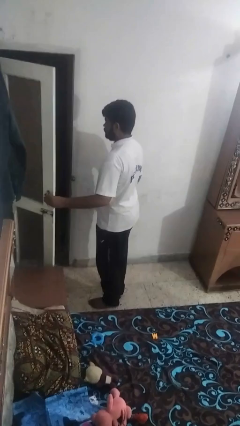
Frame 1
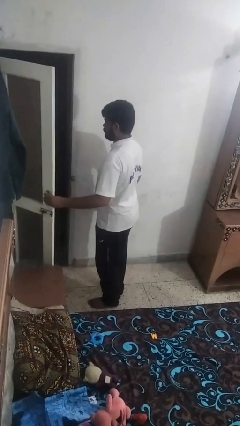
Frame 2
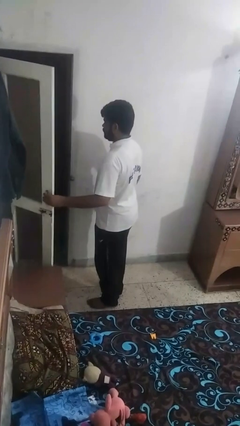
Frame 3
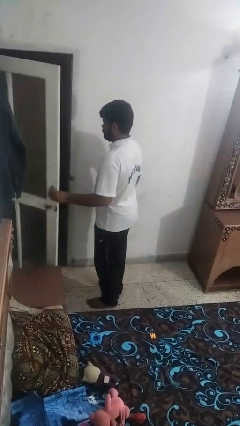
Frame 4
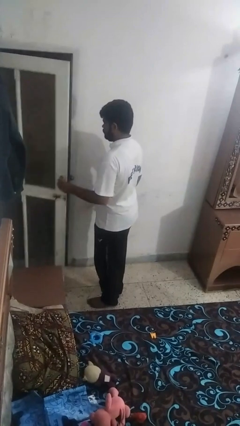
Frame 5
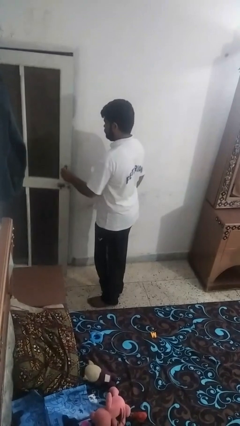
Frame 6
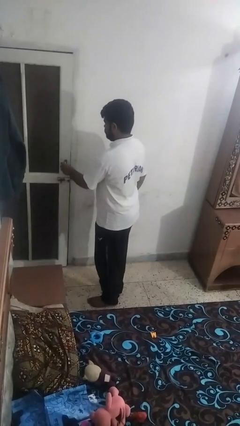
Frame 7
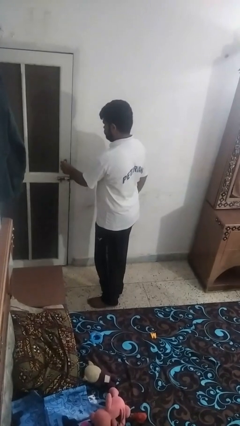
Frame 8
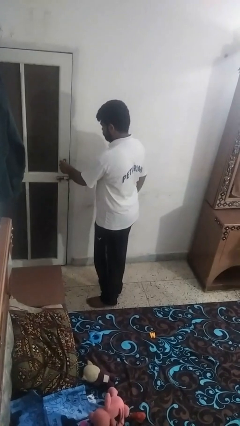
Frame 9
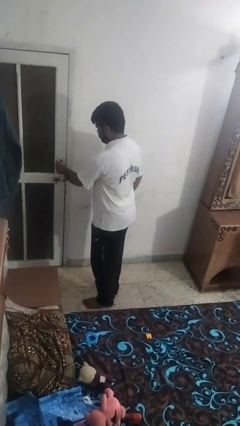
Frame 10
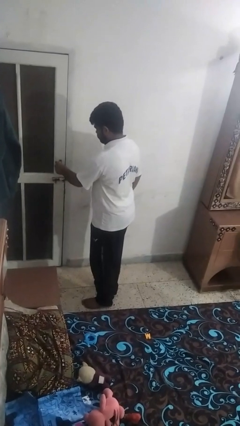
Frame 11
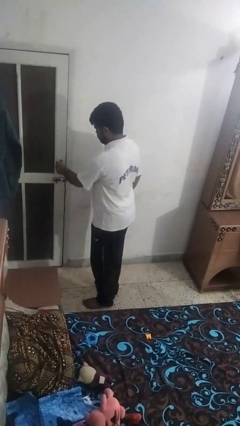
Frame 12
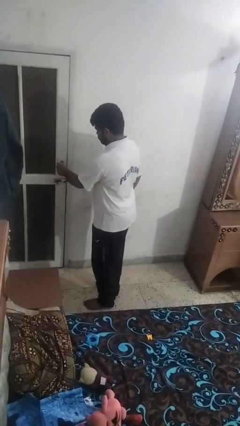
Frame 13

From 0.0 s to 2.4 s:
person closes facility door

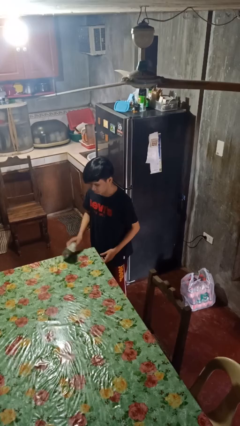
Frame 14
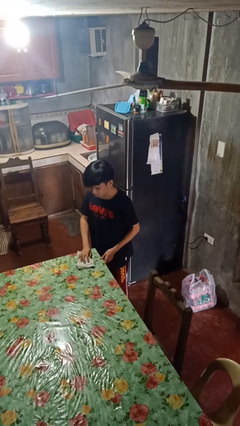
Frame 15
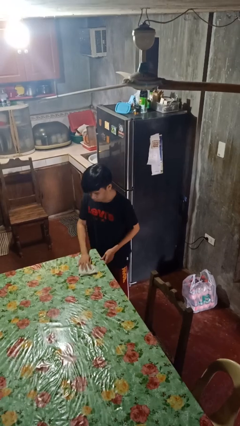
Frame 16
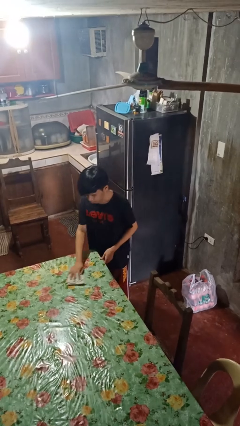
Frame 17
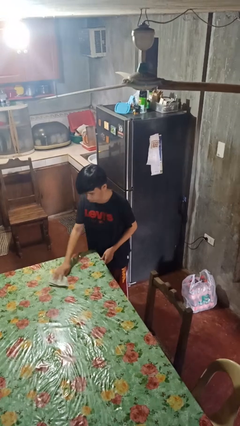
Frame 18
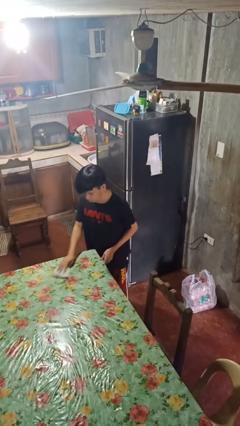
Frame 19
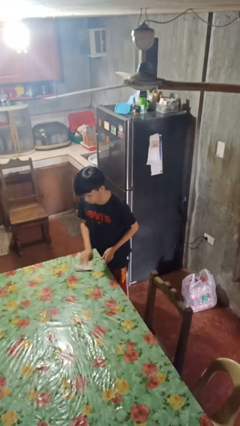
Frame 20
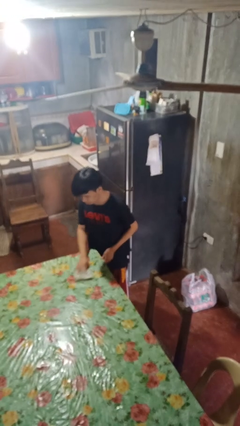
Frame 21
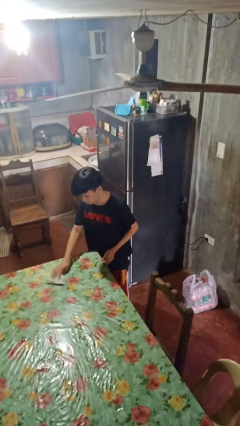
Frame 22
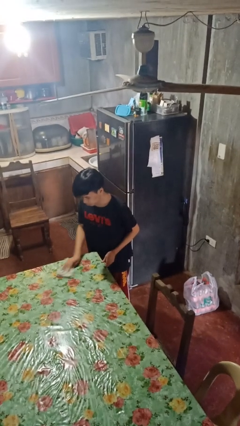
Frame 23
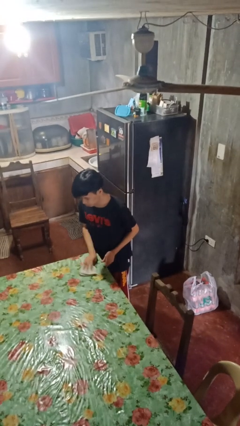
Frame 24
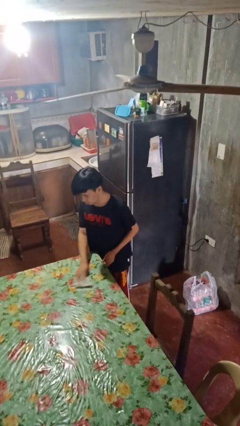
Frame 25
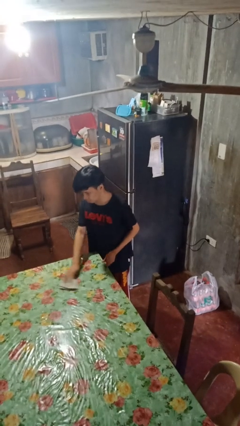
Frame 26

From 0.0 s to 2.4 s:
person cleans table with rag

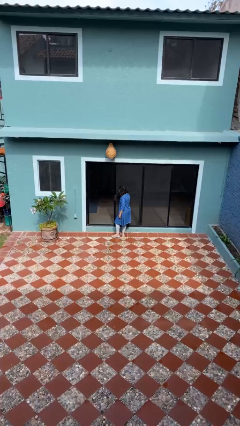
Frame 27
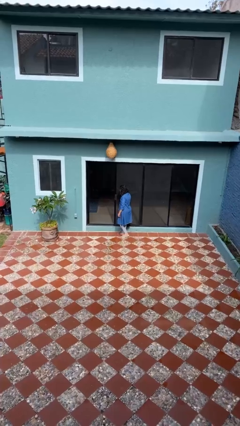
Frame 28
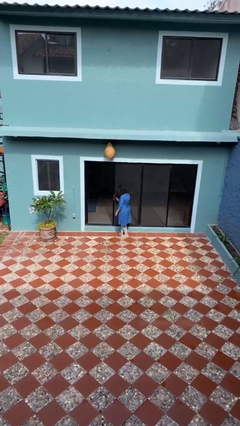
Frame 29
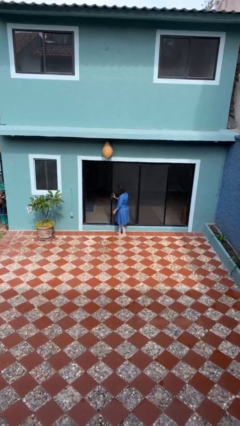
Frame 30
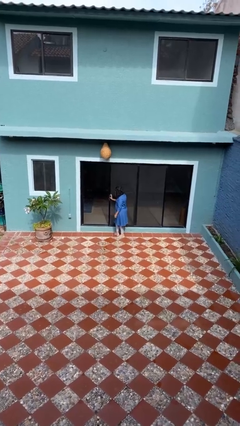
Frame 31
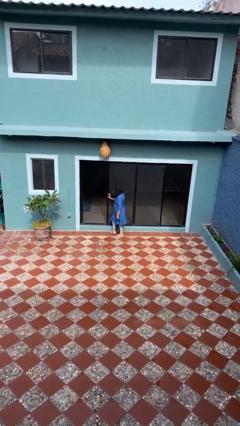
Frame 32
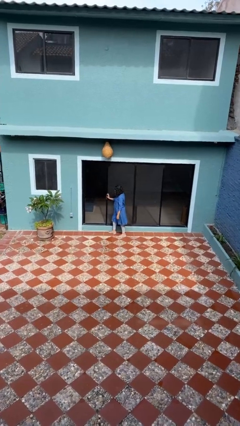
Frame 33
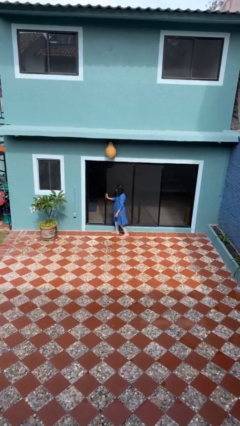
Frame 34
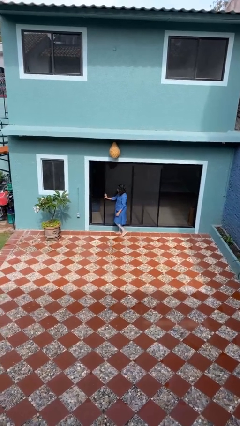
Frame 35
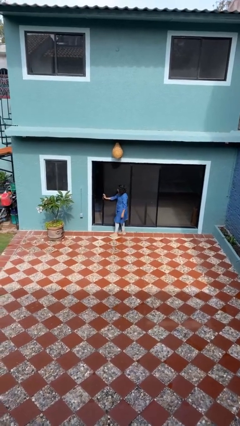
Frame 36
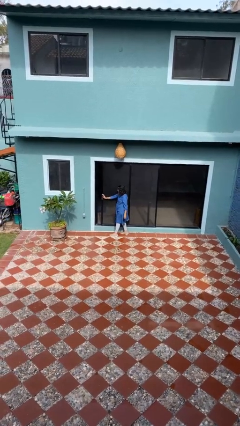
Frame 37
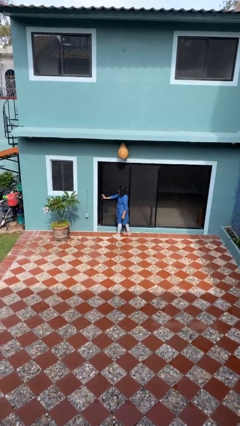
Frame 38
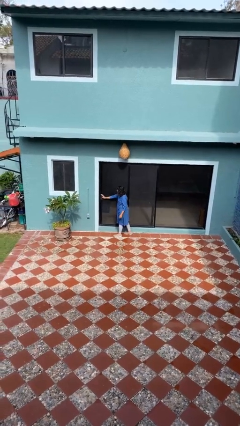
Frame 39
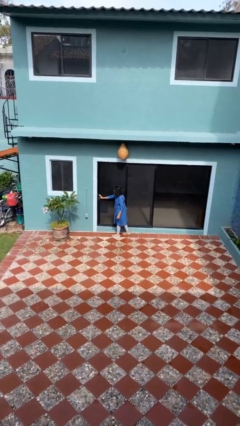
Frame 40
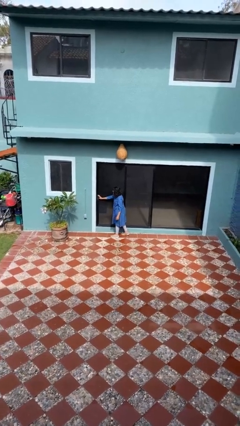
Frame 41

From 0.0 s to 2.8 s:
person closes sliding door

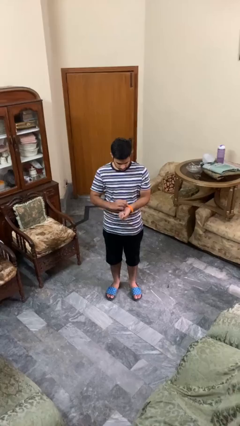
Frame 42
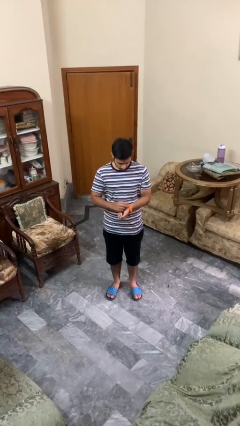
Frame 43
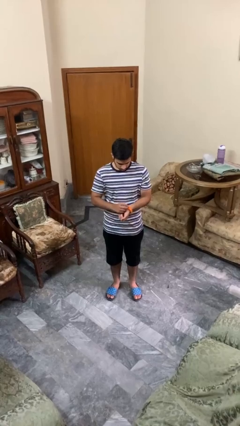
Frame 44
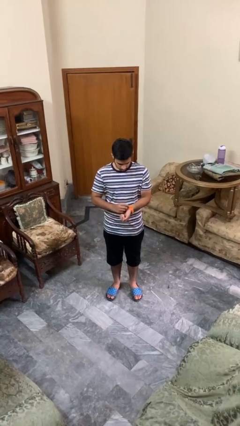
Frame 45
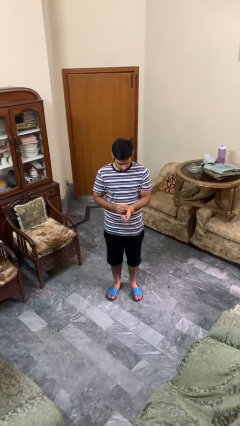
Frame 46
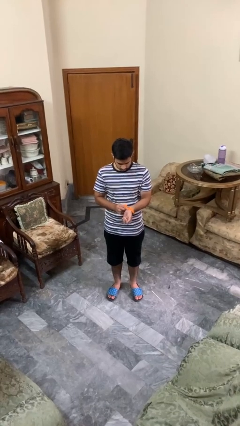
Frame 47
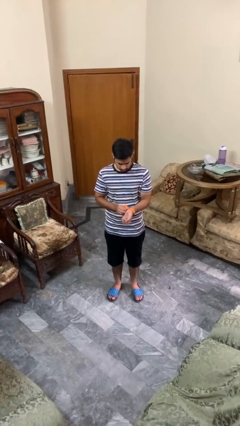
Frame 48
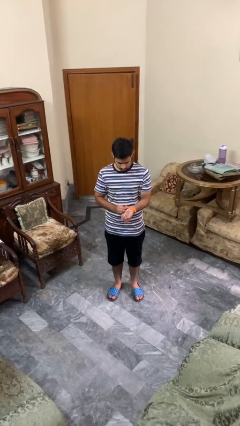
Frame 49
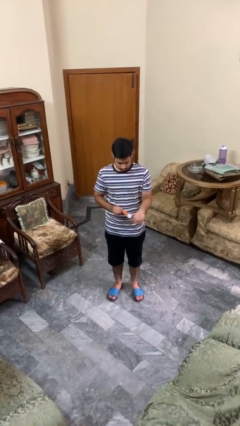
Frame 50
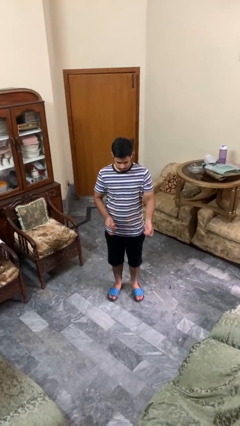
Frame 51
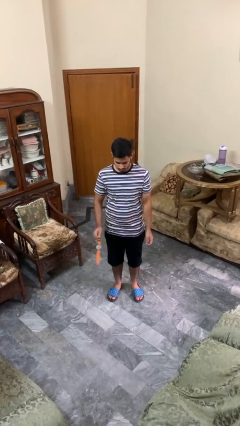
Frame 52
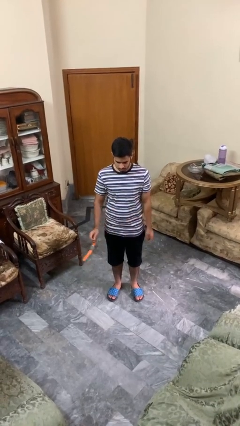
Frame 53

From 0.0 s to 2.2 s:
person takes off wristwatch

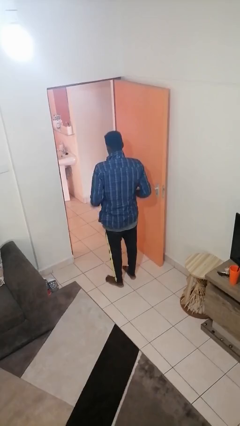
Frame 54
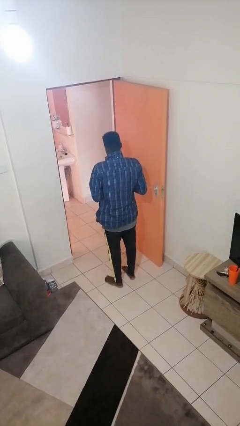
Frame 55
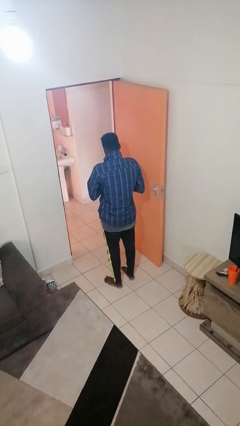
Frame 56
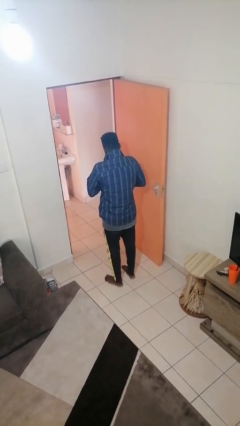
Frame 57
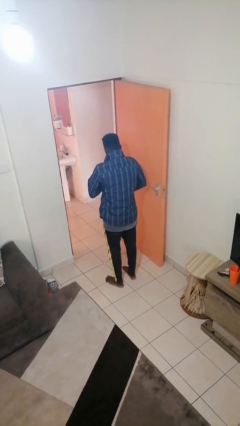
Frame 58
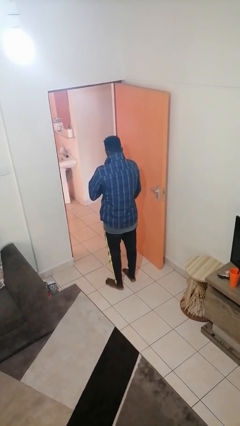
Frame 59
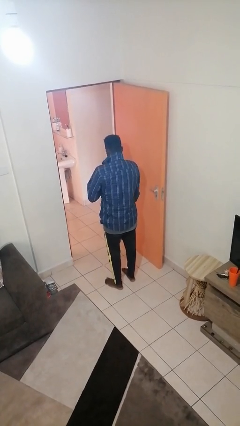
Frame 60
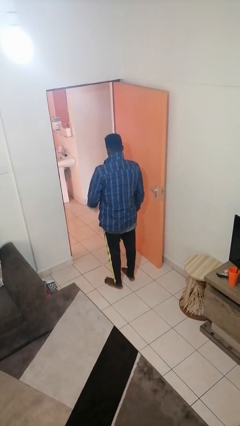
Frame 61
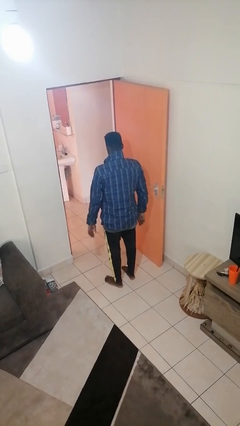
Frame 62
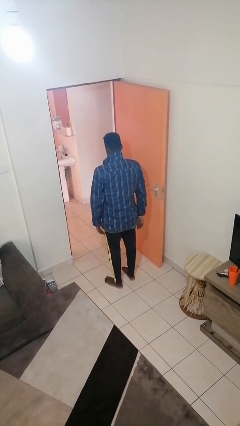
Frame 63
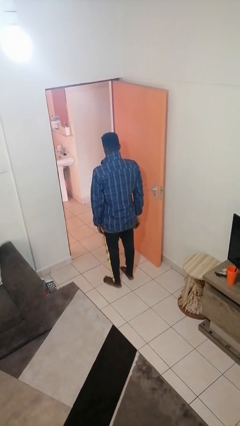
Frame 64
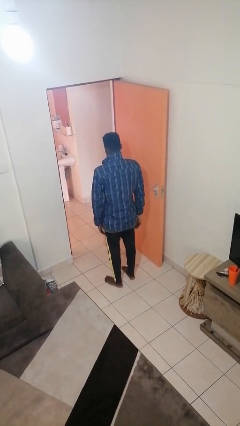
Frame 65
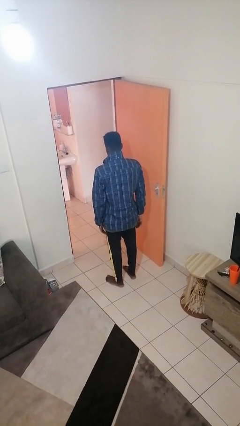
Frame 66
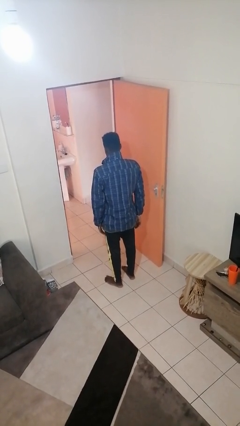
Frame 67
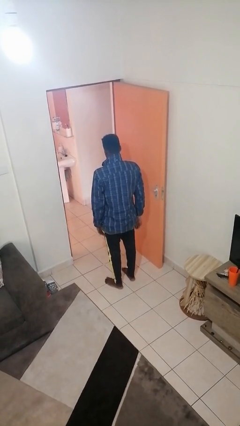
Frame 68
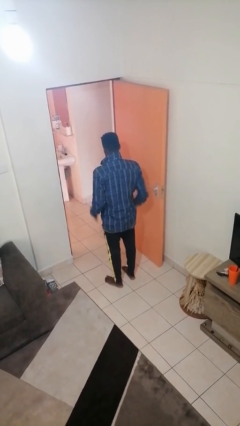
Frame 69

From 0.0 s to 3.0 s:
person unzips jacket

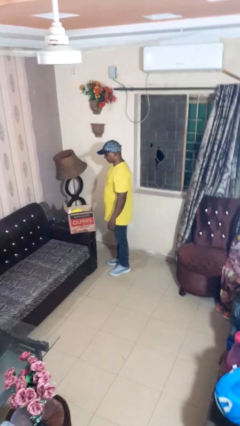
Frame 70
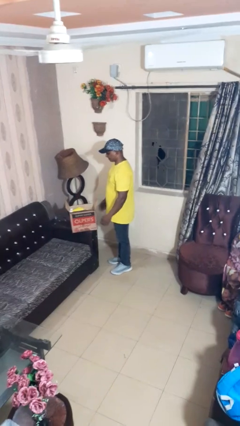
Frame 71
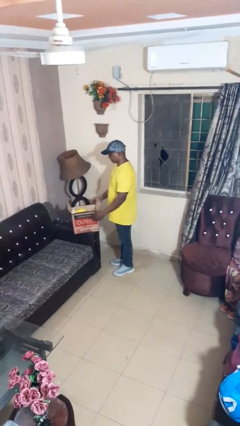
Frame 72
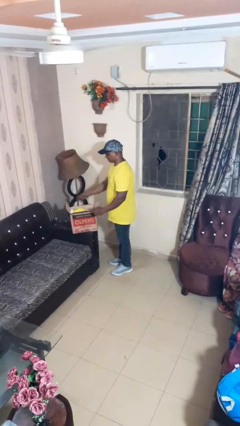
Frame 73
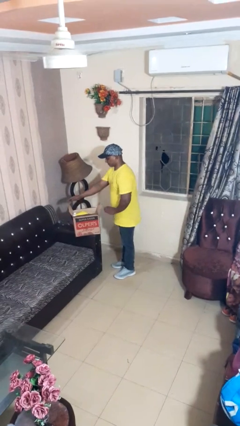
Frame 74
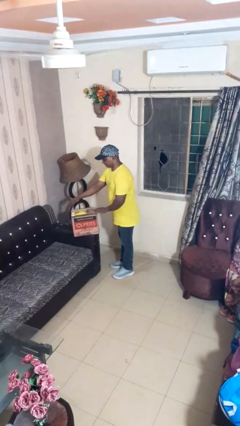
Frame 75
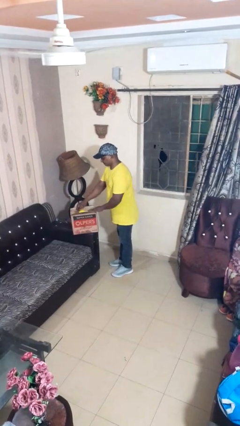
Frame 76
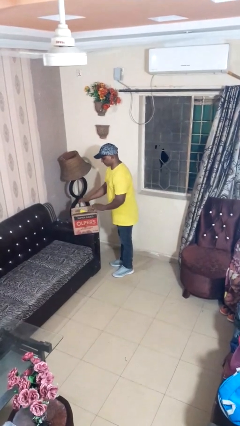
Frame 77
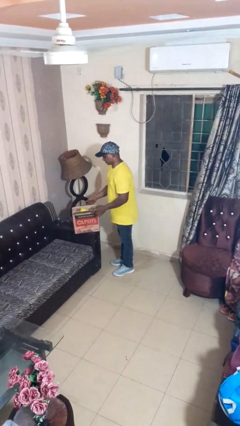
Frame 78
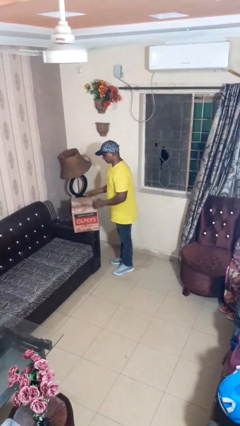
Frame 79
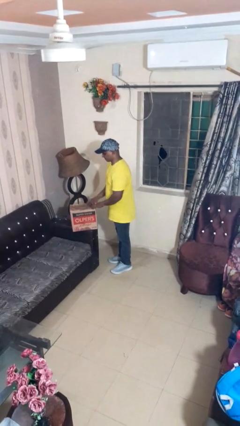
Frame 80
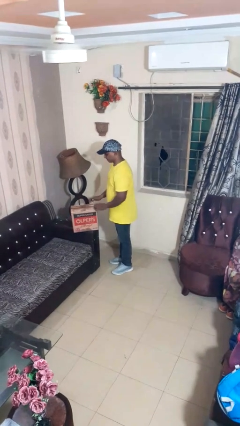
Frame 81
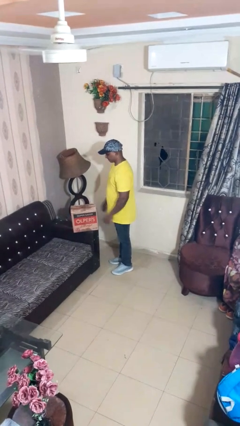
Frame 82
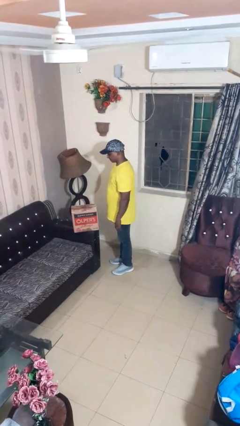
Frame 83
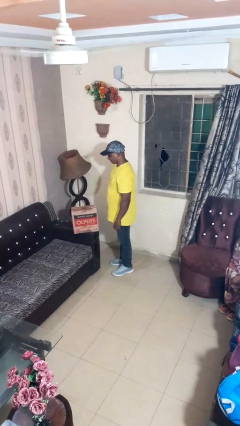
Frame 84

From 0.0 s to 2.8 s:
person closes box

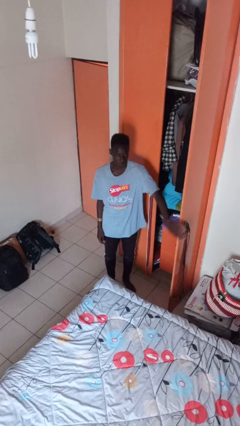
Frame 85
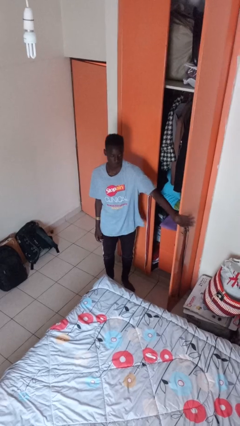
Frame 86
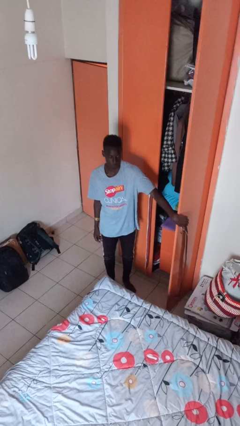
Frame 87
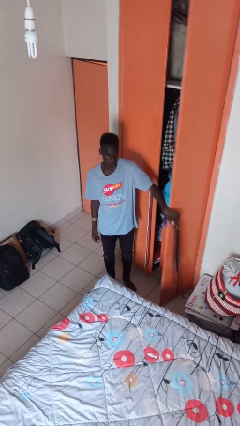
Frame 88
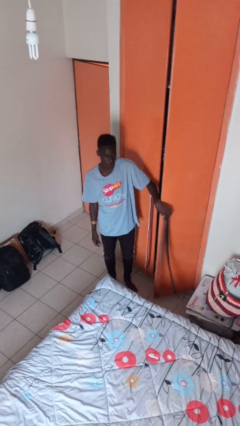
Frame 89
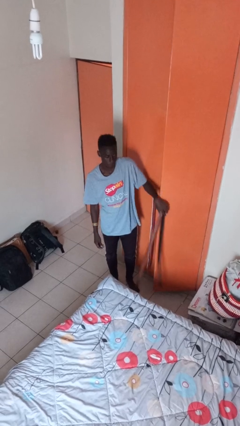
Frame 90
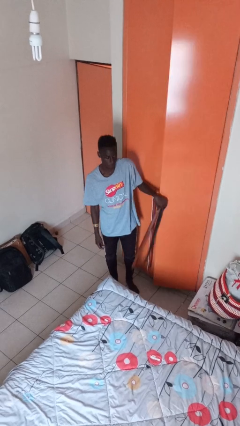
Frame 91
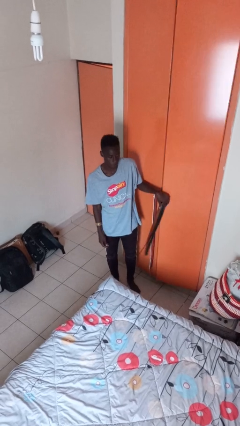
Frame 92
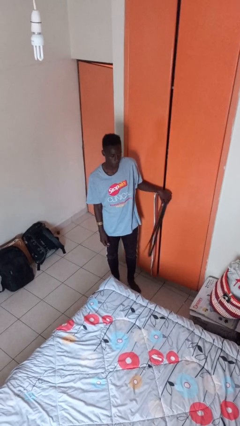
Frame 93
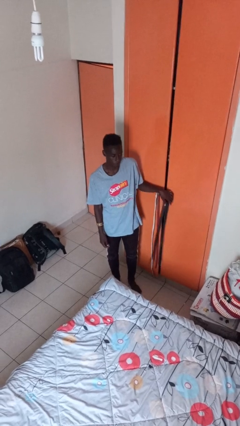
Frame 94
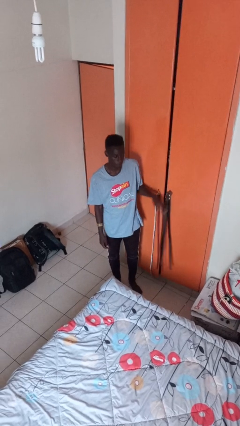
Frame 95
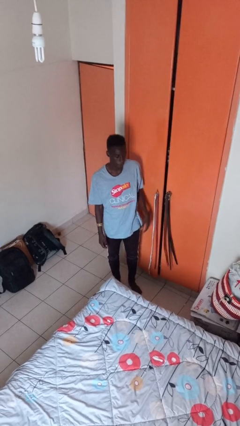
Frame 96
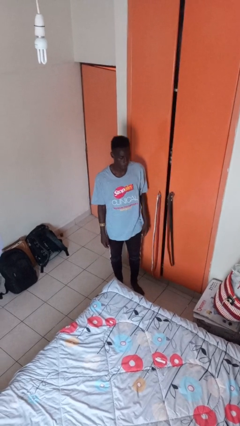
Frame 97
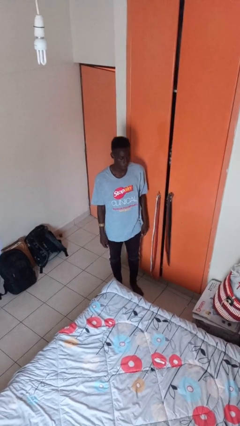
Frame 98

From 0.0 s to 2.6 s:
person closes closet door
